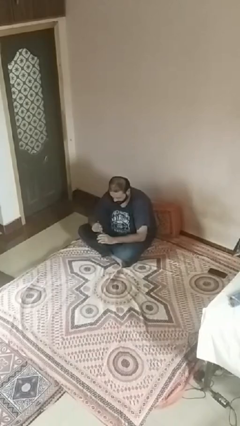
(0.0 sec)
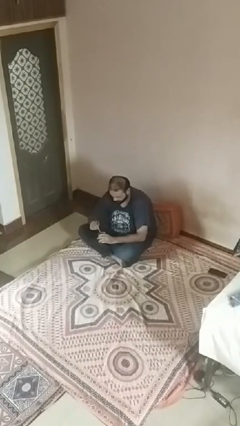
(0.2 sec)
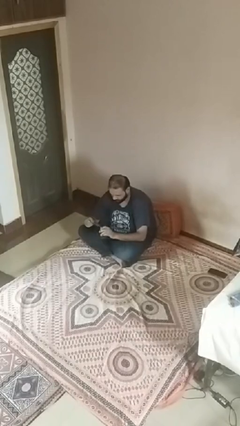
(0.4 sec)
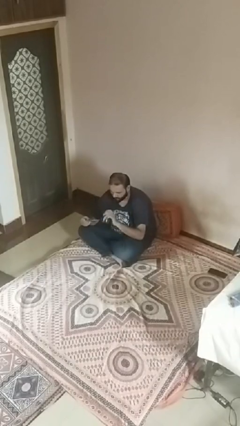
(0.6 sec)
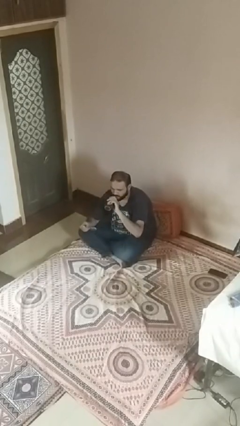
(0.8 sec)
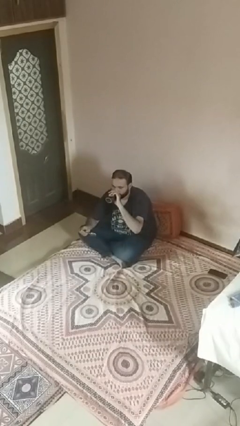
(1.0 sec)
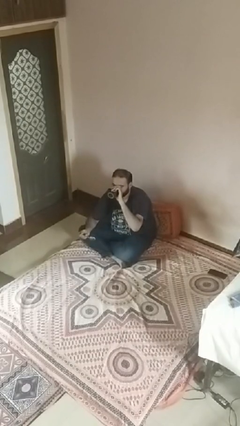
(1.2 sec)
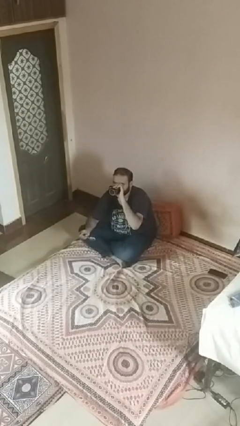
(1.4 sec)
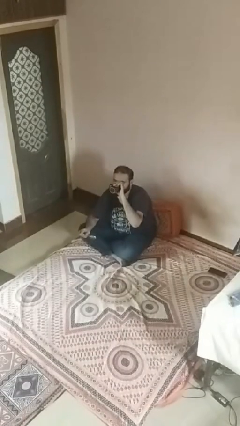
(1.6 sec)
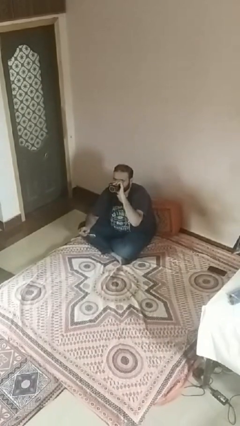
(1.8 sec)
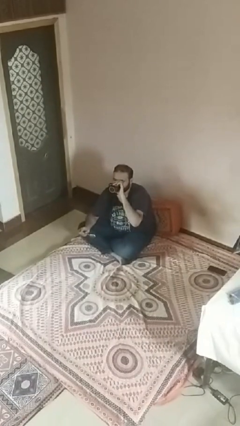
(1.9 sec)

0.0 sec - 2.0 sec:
person drinks from mug

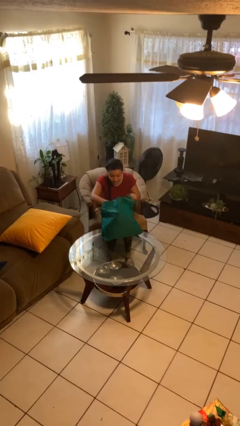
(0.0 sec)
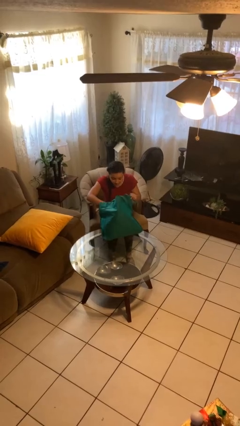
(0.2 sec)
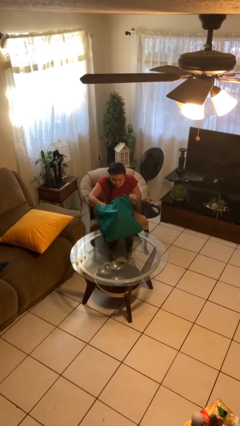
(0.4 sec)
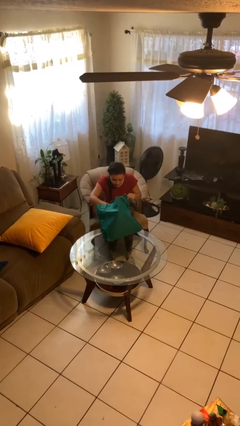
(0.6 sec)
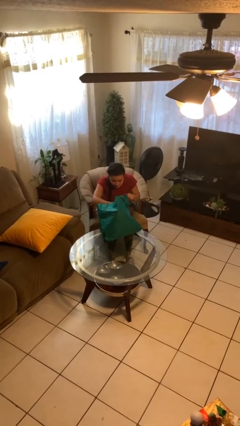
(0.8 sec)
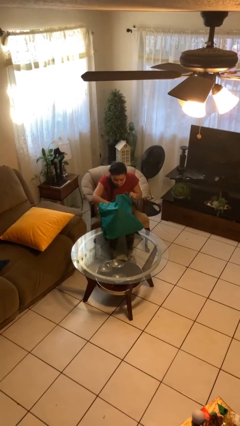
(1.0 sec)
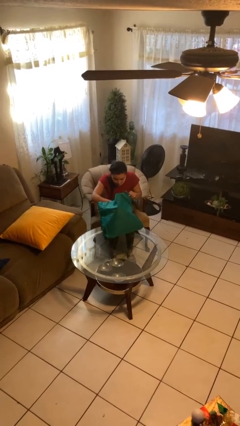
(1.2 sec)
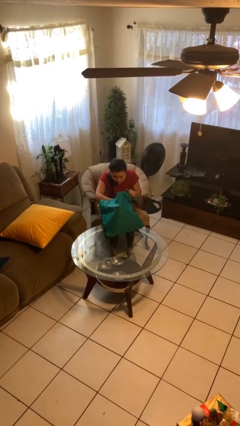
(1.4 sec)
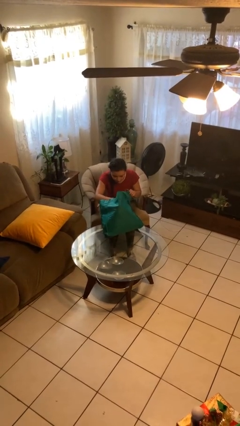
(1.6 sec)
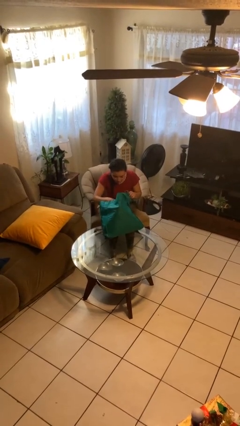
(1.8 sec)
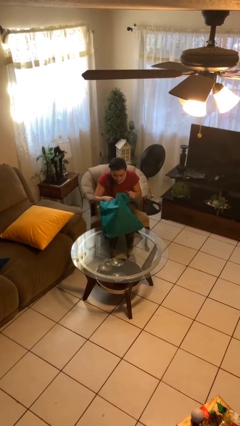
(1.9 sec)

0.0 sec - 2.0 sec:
person searches in bag

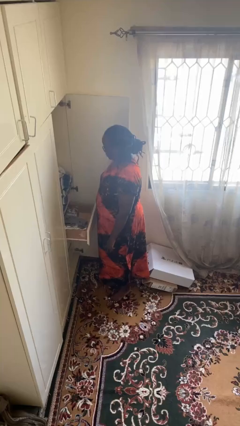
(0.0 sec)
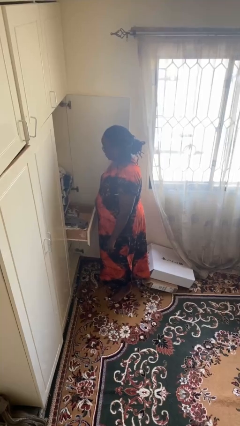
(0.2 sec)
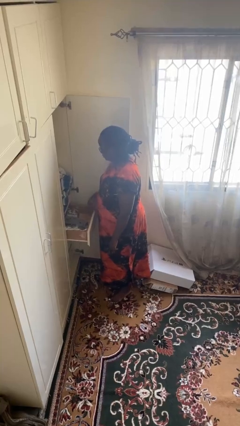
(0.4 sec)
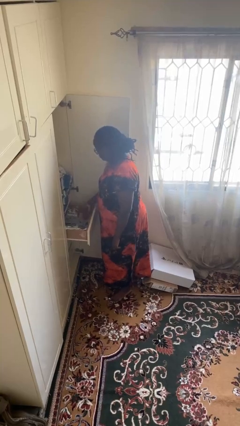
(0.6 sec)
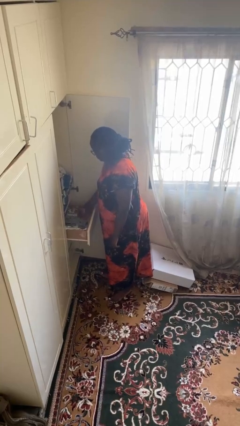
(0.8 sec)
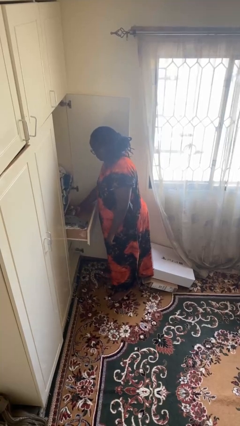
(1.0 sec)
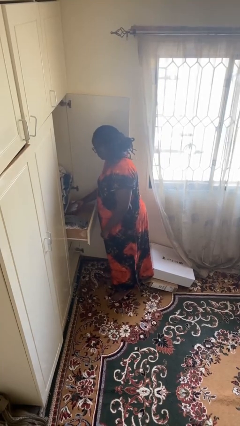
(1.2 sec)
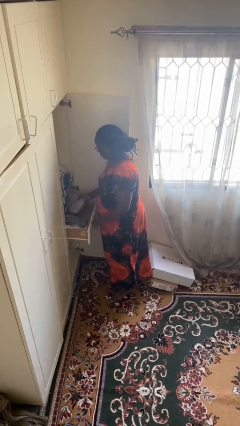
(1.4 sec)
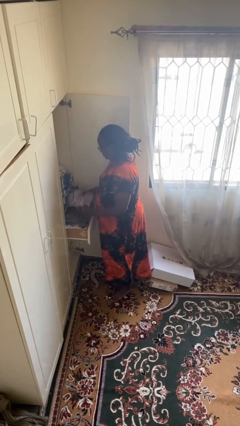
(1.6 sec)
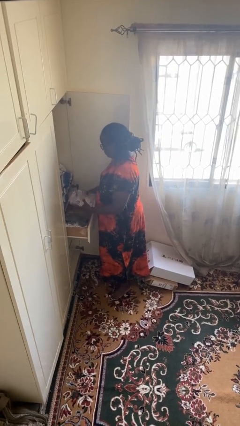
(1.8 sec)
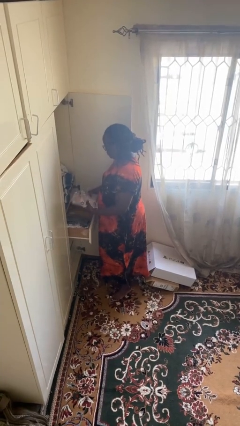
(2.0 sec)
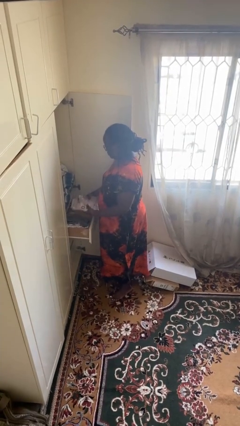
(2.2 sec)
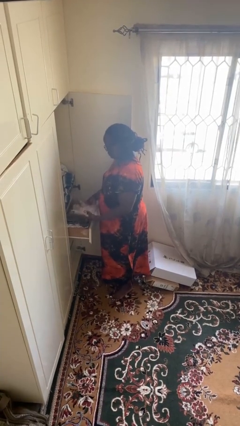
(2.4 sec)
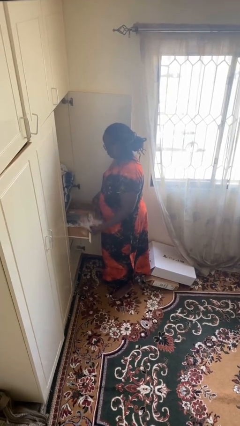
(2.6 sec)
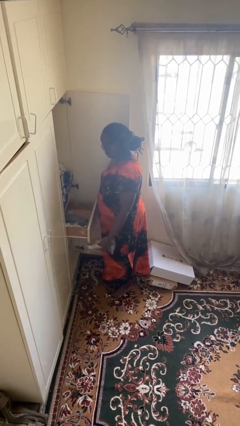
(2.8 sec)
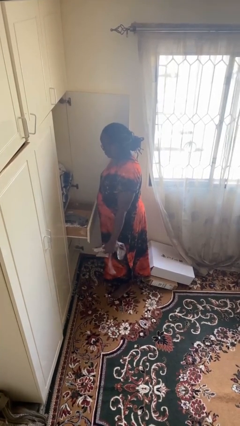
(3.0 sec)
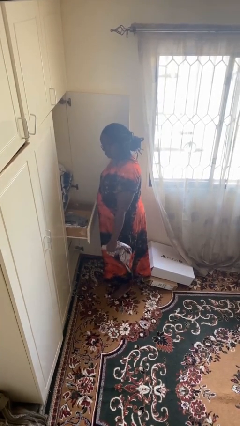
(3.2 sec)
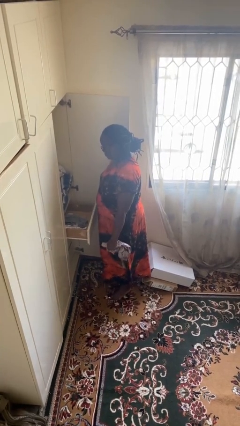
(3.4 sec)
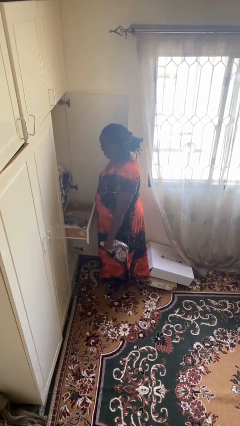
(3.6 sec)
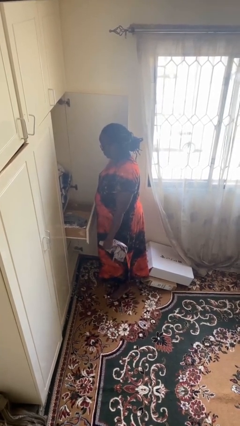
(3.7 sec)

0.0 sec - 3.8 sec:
person takes clothes from dresser

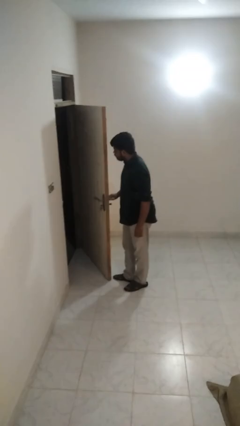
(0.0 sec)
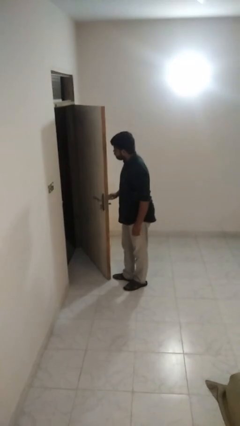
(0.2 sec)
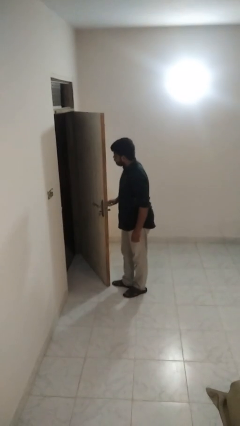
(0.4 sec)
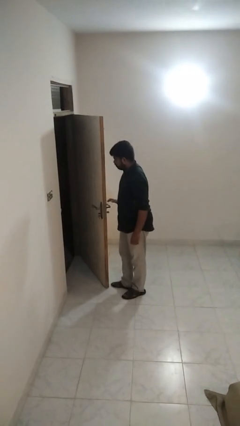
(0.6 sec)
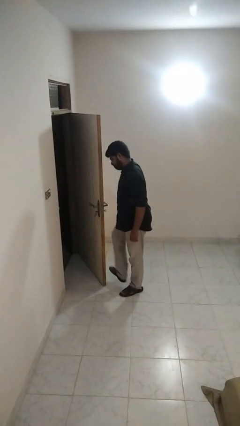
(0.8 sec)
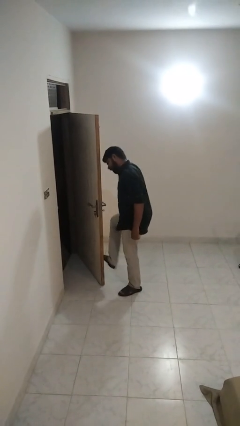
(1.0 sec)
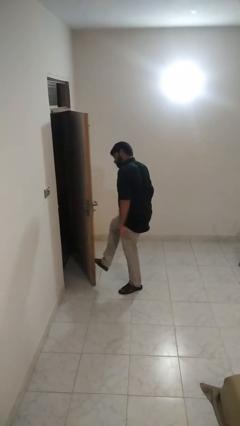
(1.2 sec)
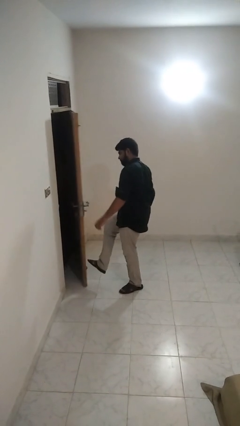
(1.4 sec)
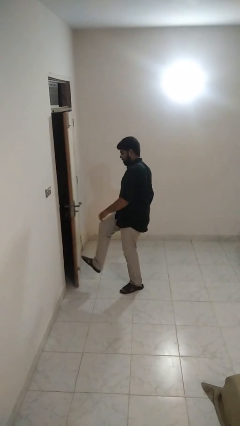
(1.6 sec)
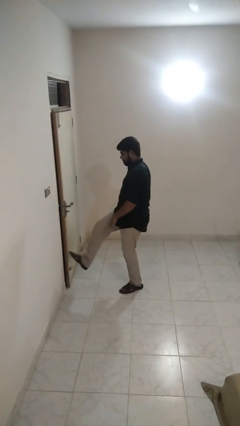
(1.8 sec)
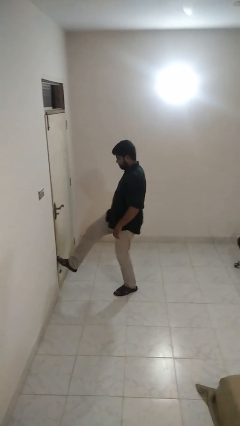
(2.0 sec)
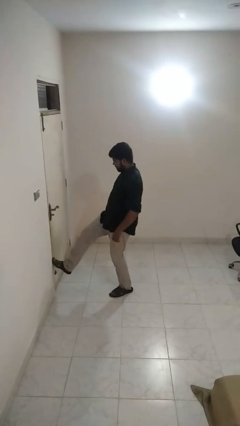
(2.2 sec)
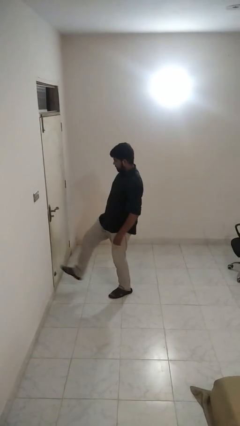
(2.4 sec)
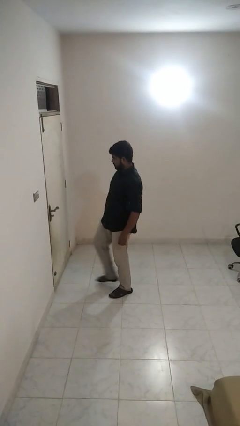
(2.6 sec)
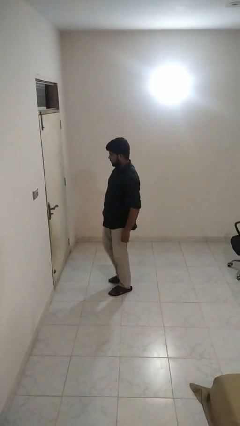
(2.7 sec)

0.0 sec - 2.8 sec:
person closes door with foot

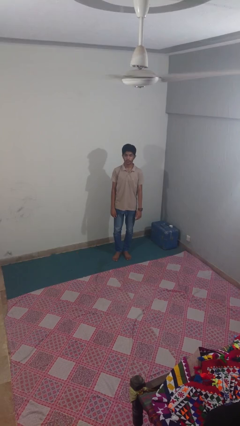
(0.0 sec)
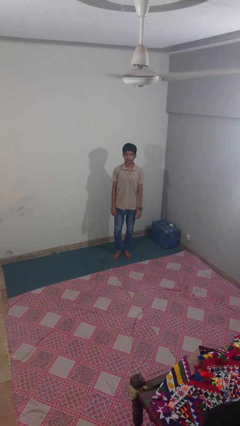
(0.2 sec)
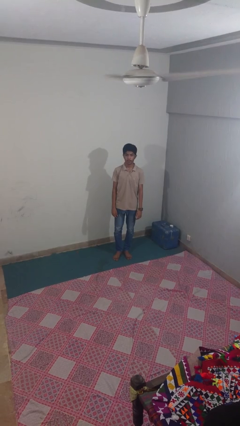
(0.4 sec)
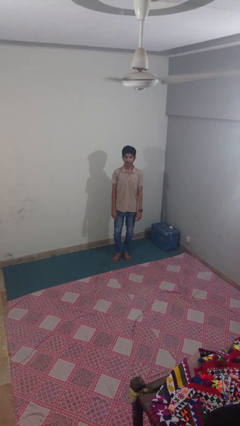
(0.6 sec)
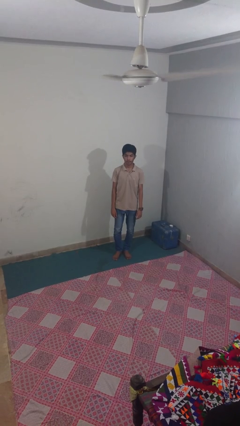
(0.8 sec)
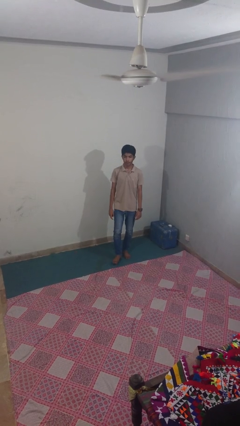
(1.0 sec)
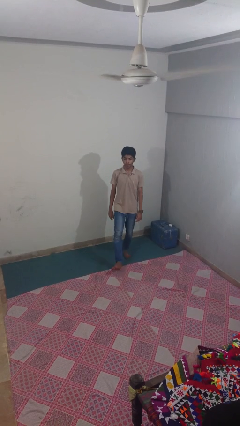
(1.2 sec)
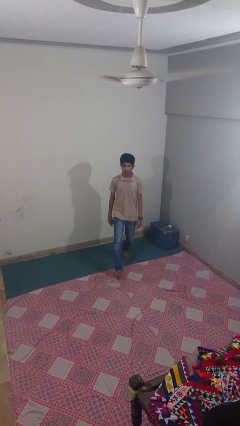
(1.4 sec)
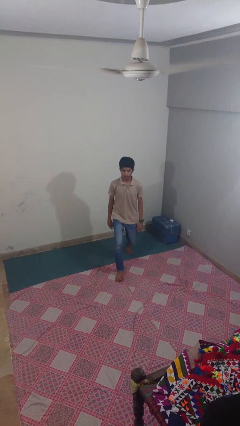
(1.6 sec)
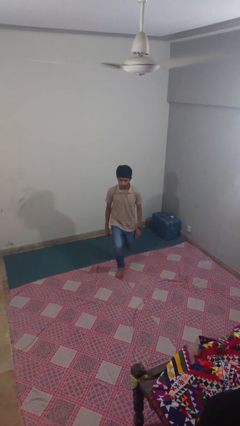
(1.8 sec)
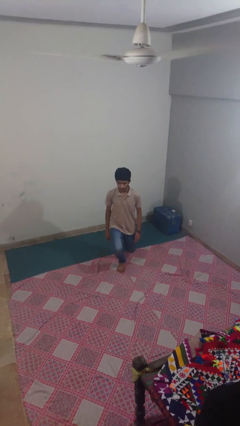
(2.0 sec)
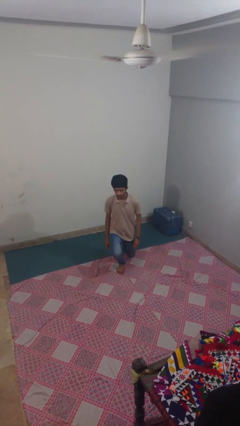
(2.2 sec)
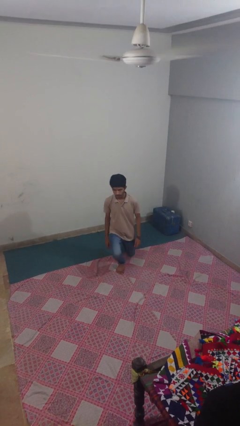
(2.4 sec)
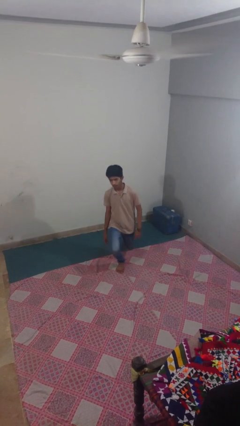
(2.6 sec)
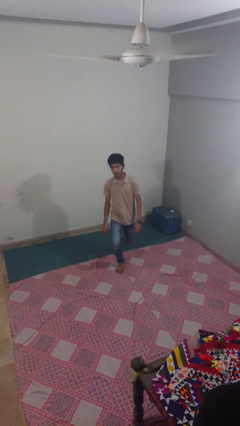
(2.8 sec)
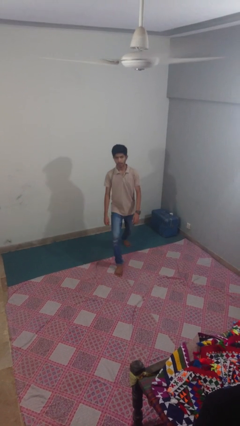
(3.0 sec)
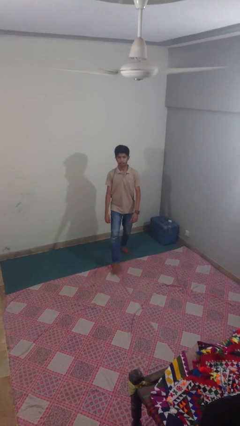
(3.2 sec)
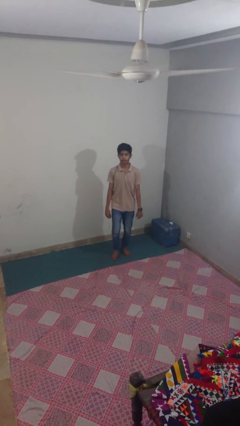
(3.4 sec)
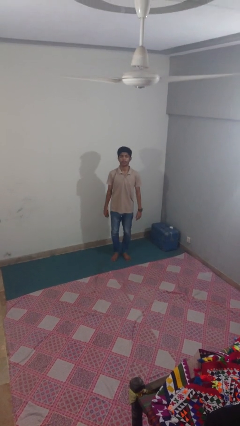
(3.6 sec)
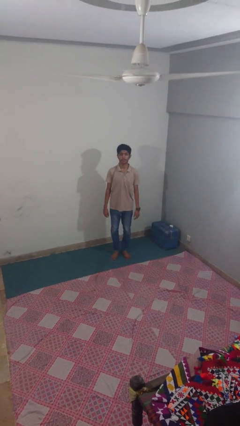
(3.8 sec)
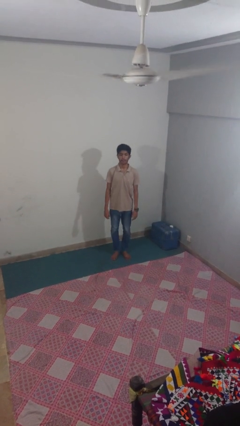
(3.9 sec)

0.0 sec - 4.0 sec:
person exercises with lunges

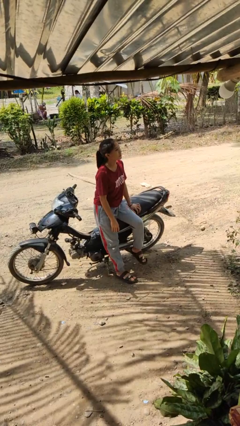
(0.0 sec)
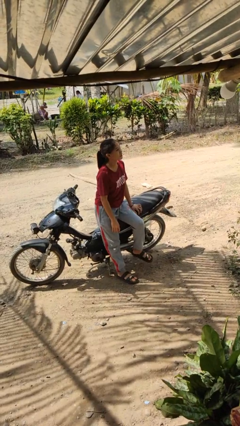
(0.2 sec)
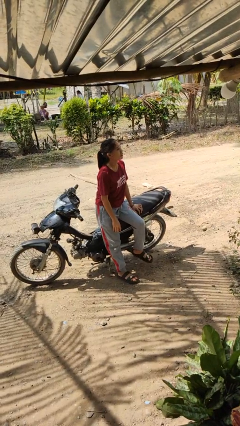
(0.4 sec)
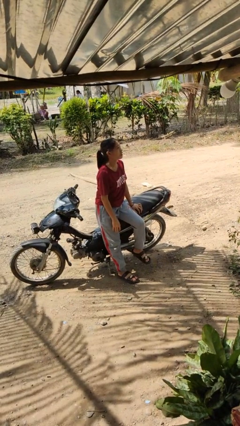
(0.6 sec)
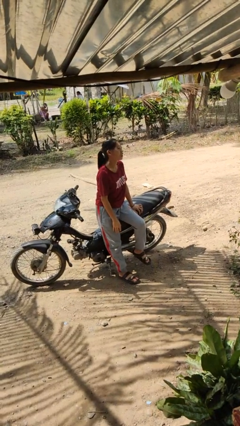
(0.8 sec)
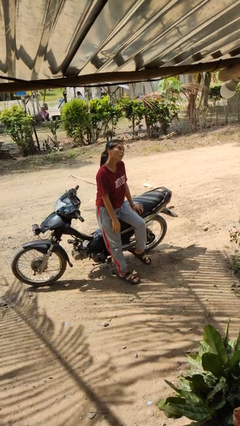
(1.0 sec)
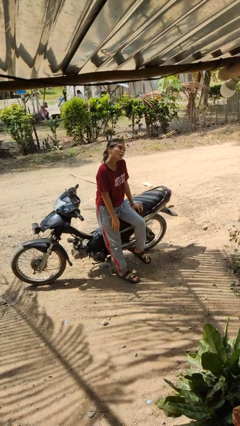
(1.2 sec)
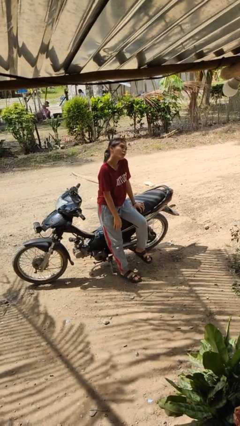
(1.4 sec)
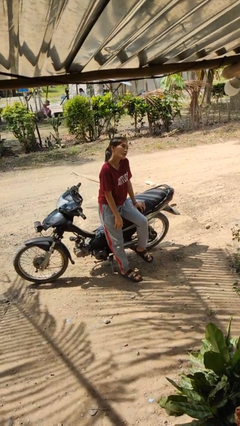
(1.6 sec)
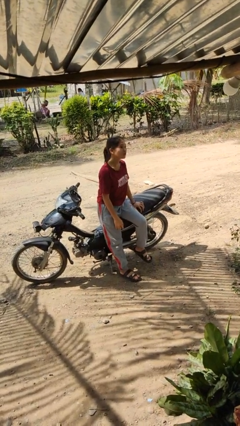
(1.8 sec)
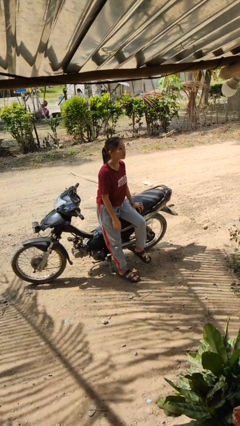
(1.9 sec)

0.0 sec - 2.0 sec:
person shrugs

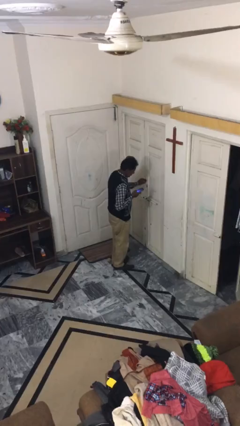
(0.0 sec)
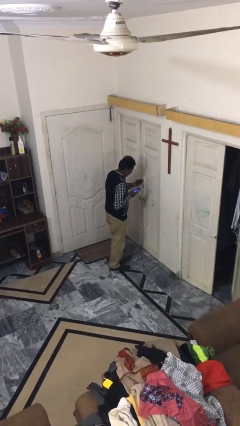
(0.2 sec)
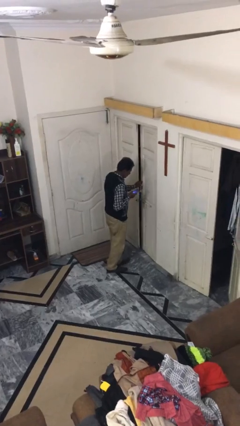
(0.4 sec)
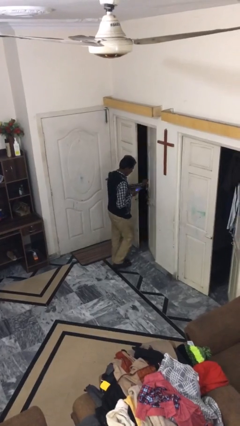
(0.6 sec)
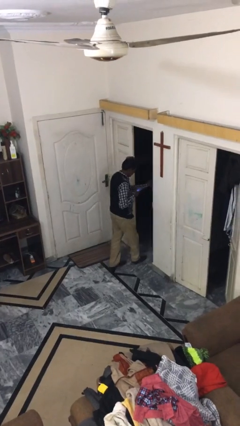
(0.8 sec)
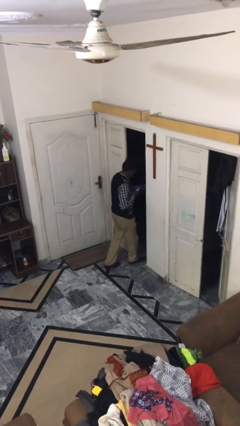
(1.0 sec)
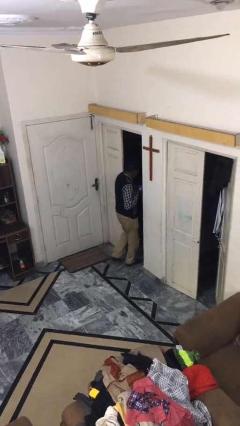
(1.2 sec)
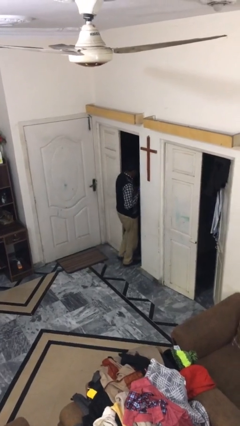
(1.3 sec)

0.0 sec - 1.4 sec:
person exits scene through structure
